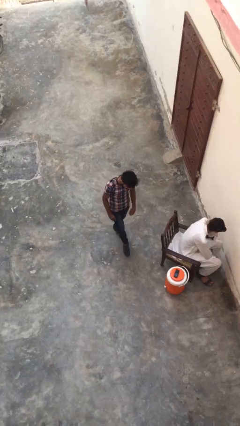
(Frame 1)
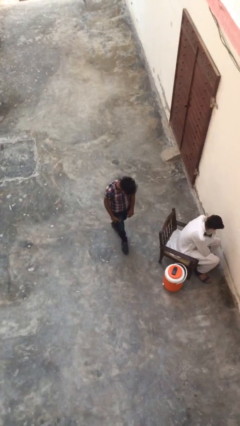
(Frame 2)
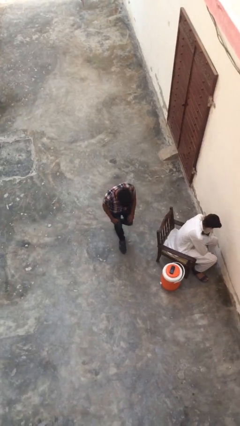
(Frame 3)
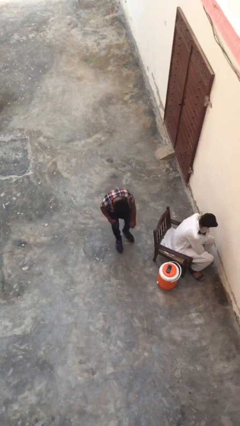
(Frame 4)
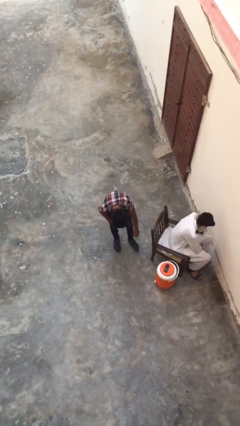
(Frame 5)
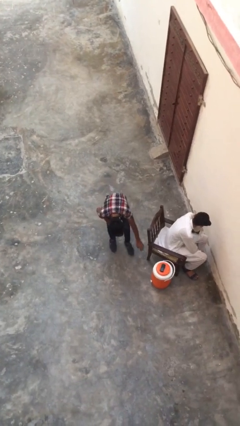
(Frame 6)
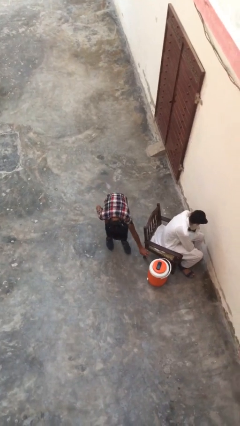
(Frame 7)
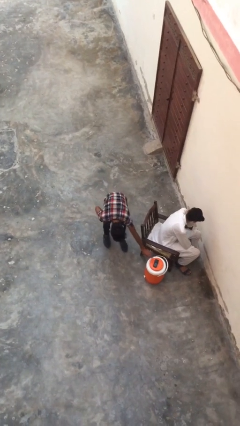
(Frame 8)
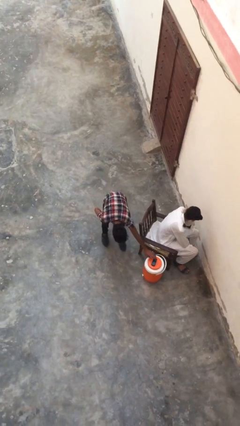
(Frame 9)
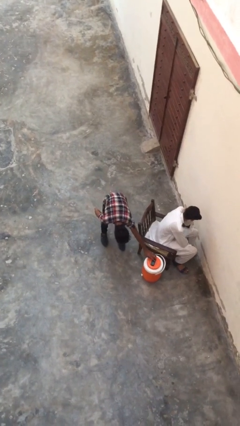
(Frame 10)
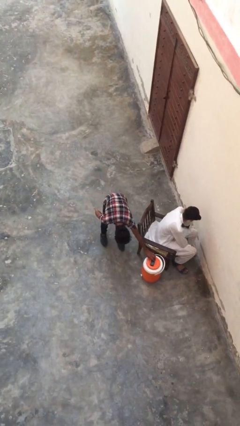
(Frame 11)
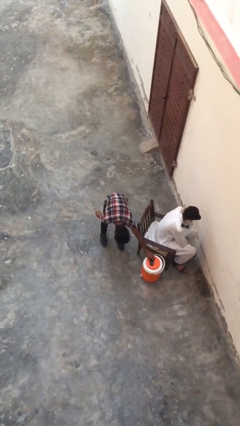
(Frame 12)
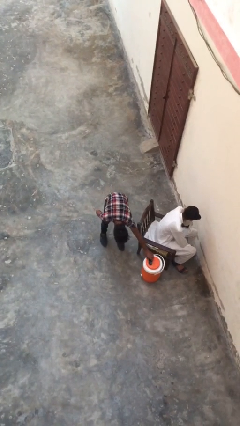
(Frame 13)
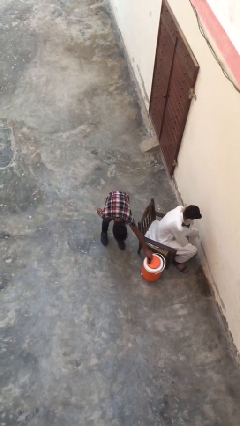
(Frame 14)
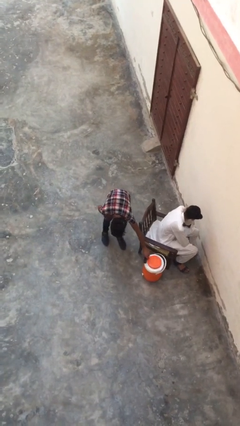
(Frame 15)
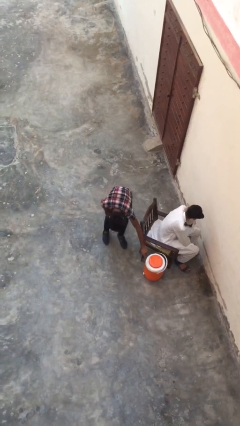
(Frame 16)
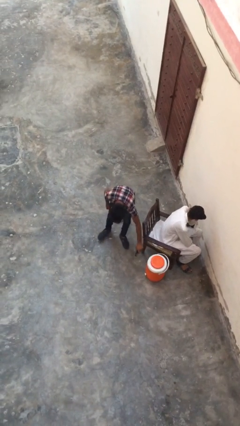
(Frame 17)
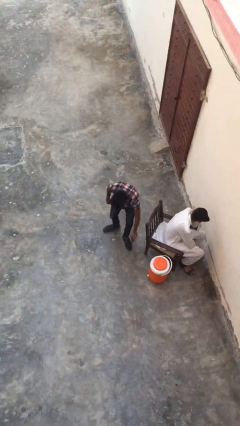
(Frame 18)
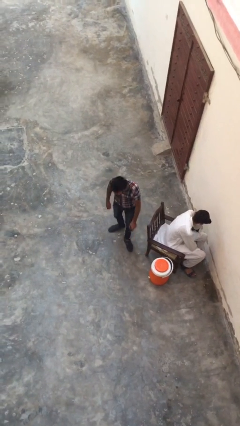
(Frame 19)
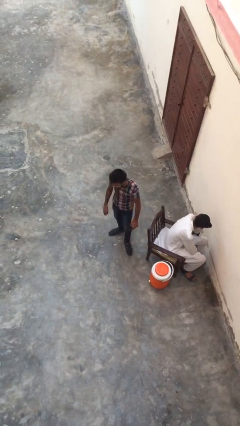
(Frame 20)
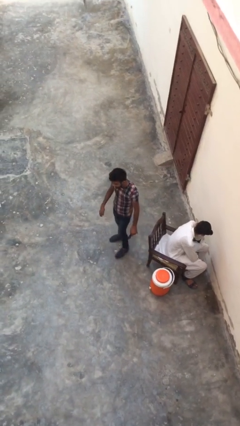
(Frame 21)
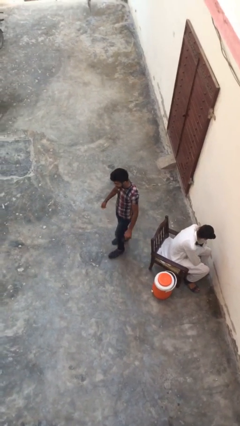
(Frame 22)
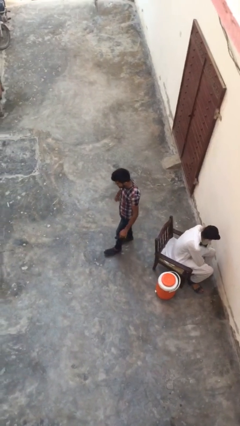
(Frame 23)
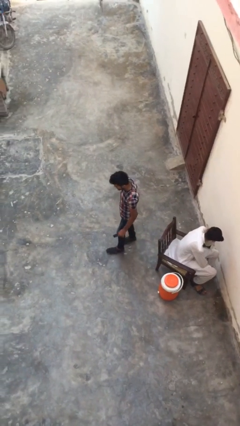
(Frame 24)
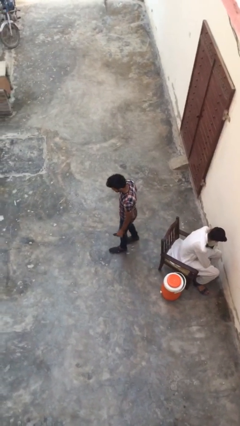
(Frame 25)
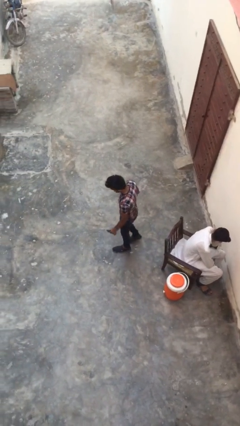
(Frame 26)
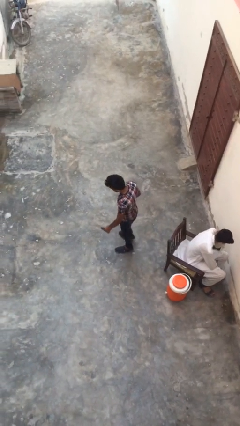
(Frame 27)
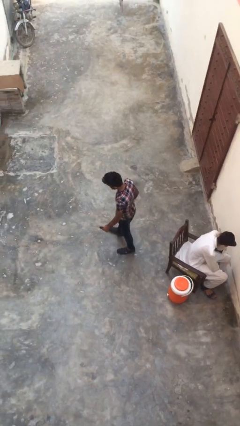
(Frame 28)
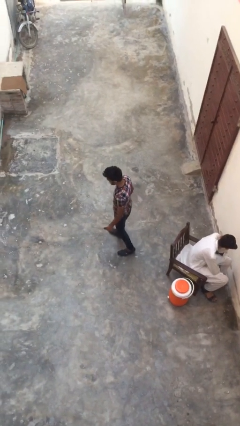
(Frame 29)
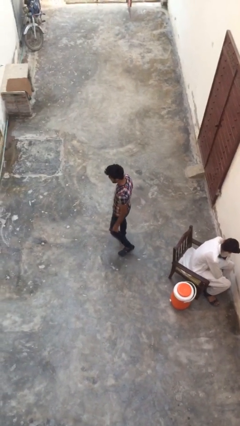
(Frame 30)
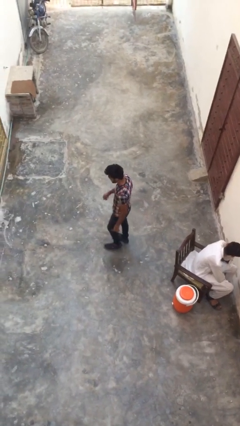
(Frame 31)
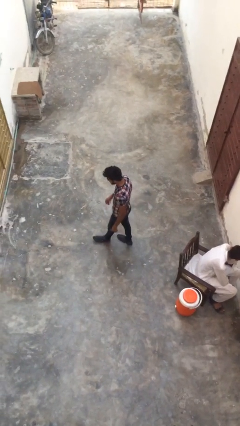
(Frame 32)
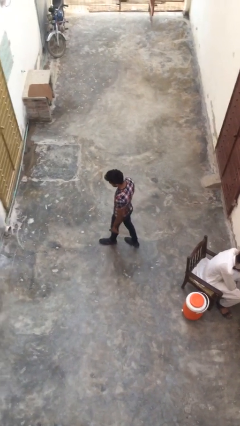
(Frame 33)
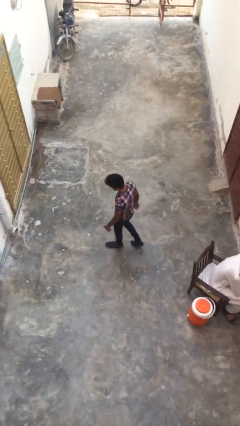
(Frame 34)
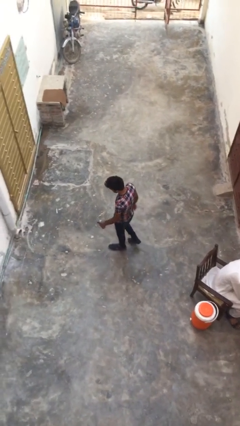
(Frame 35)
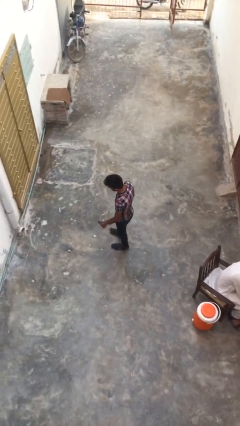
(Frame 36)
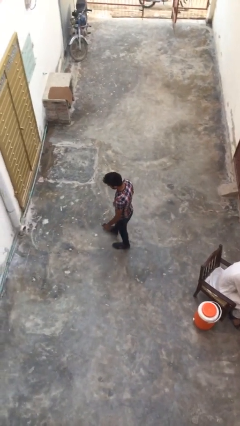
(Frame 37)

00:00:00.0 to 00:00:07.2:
person steals object from person

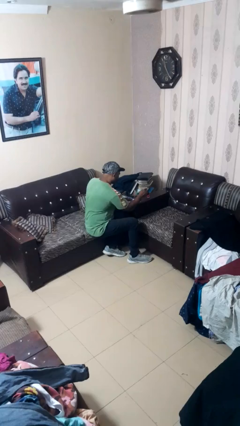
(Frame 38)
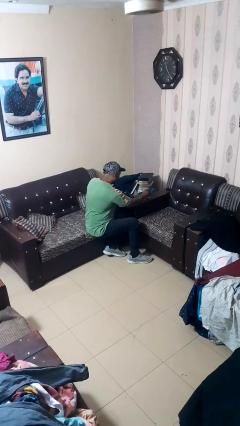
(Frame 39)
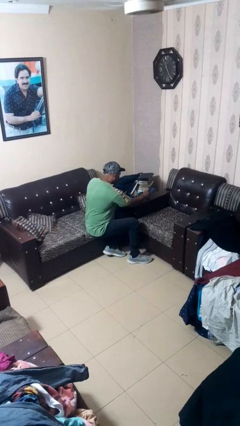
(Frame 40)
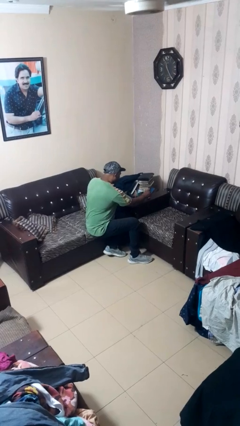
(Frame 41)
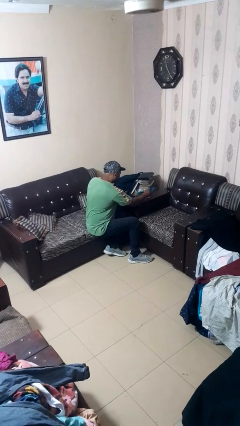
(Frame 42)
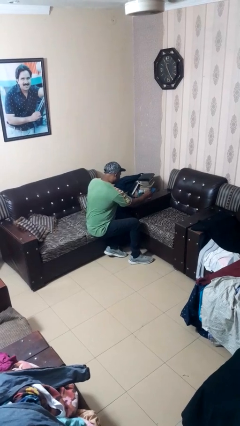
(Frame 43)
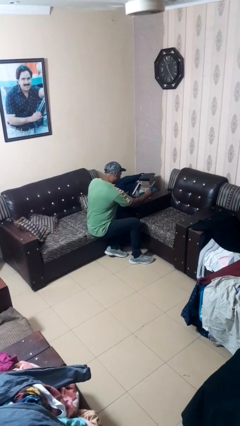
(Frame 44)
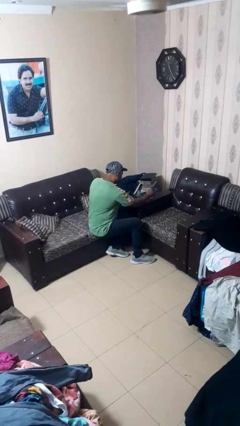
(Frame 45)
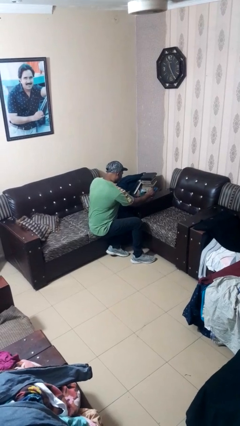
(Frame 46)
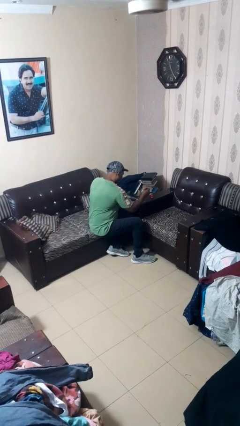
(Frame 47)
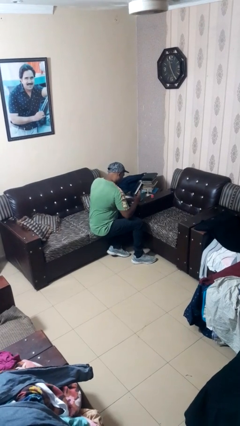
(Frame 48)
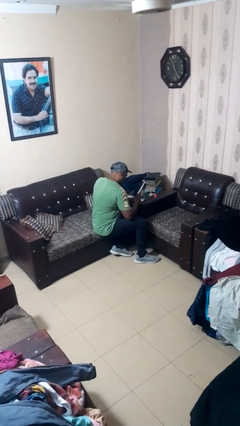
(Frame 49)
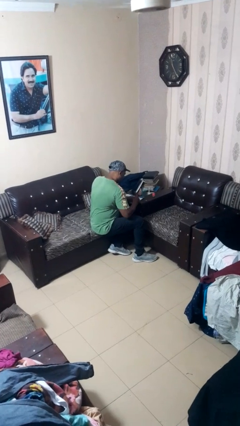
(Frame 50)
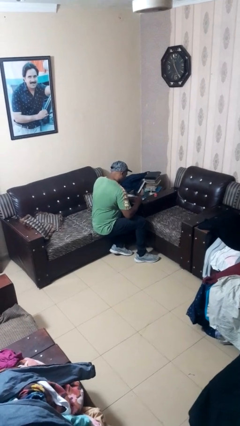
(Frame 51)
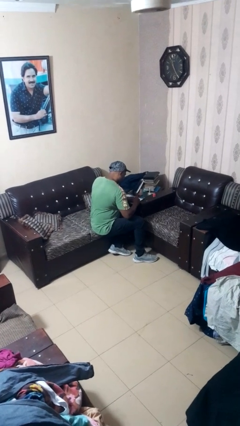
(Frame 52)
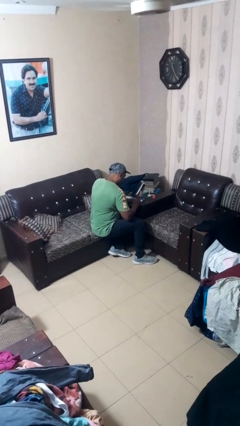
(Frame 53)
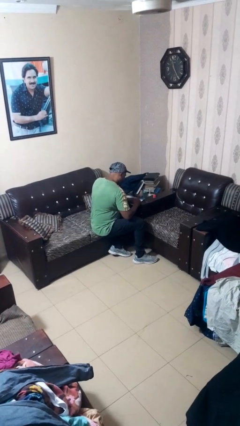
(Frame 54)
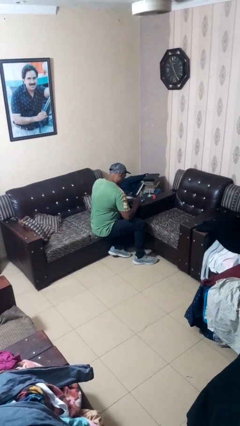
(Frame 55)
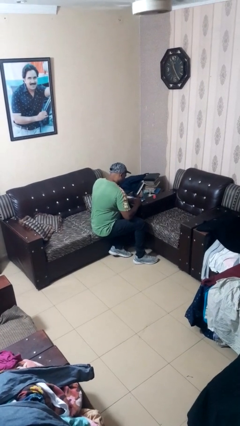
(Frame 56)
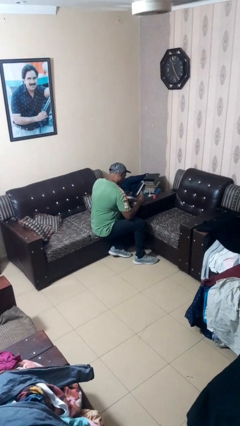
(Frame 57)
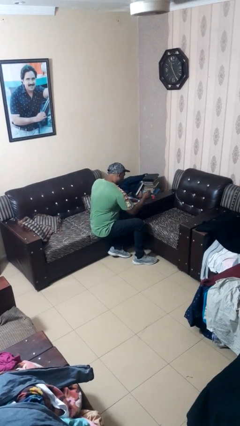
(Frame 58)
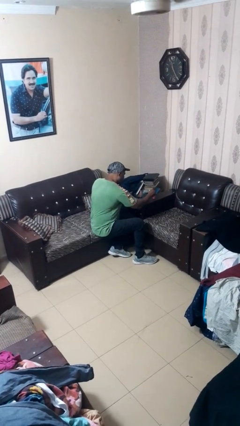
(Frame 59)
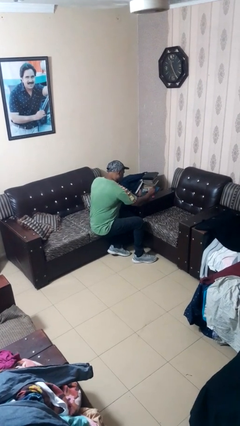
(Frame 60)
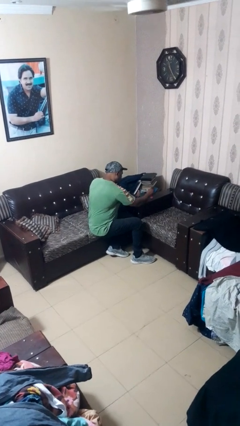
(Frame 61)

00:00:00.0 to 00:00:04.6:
person paints fingernails

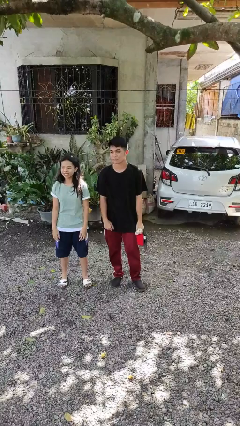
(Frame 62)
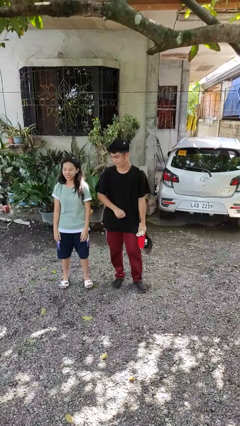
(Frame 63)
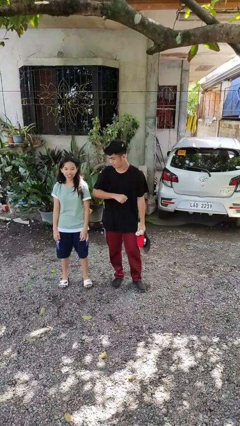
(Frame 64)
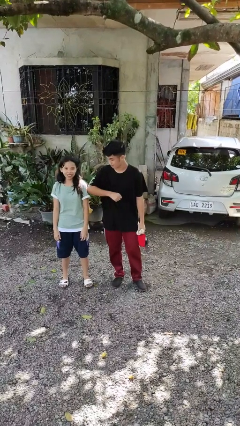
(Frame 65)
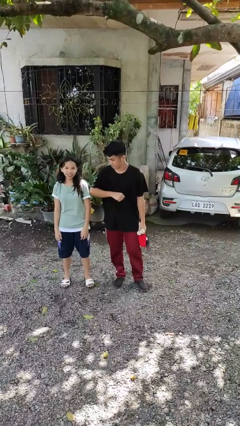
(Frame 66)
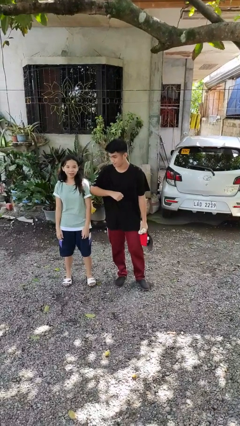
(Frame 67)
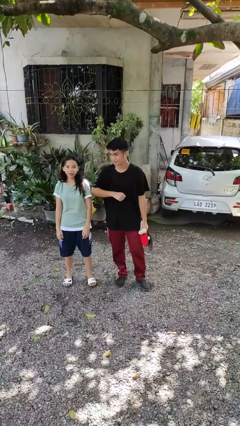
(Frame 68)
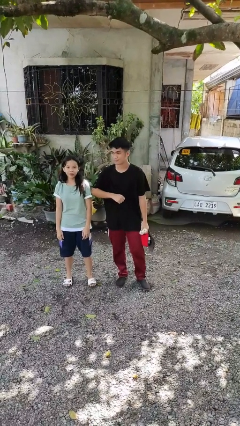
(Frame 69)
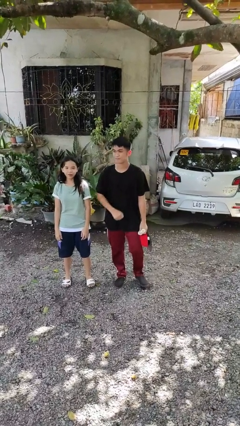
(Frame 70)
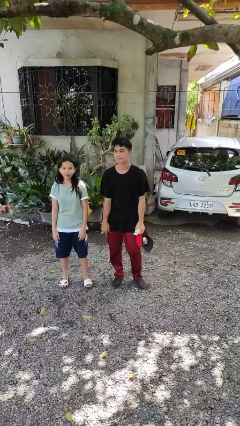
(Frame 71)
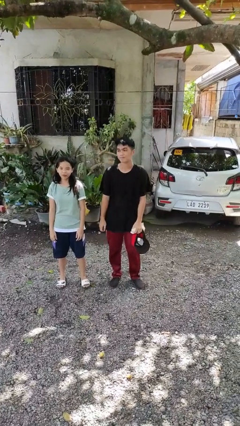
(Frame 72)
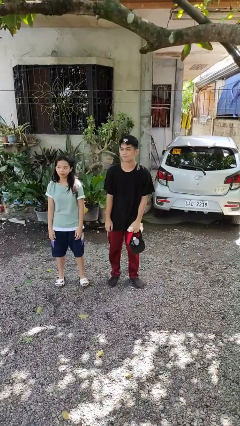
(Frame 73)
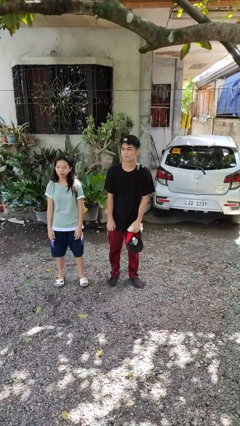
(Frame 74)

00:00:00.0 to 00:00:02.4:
person nudges person with elbow

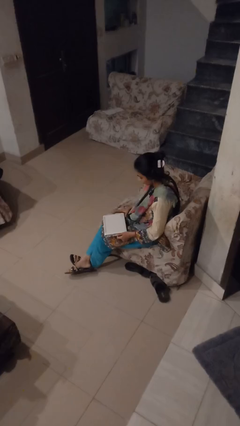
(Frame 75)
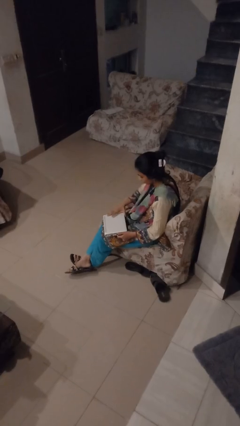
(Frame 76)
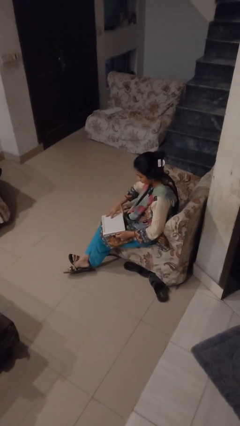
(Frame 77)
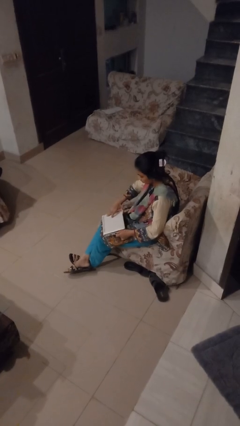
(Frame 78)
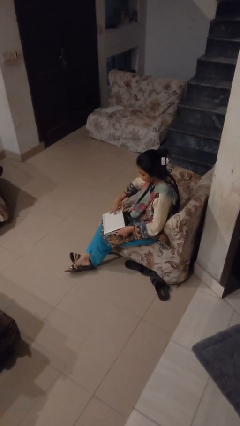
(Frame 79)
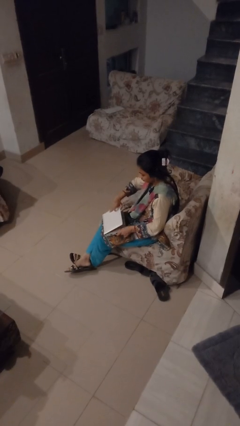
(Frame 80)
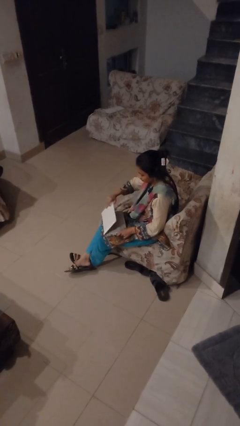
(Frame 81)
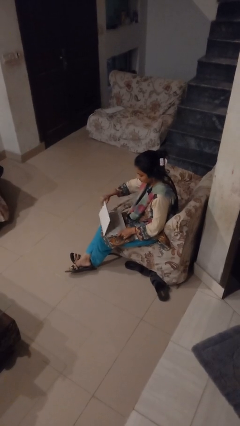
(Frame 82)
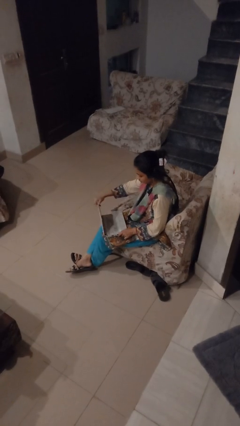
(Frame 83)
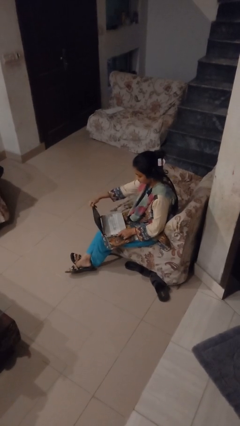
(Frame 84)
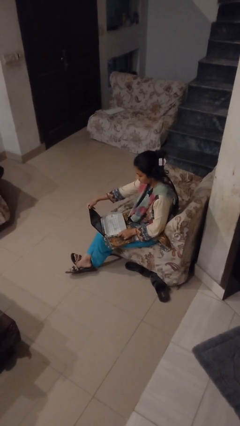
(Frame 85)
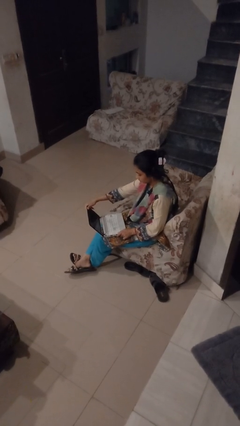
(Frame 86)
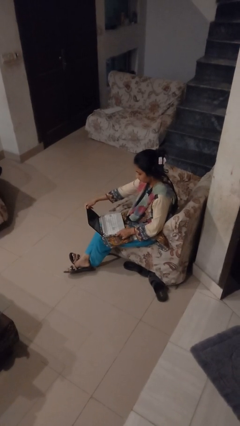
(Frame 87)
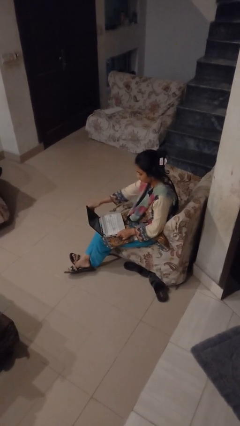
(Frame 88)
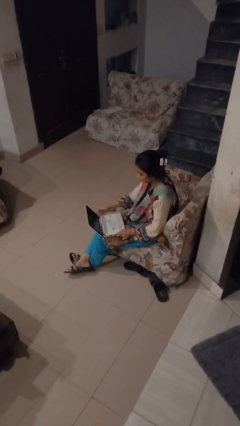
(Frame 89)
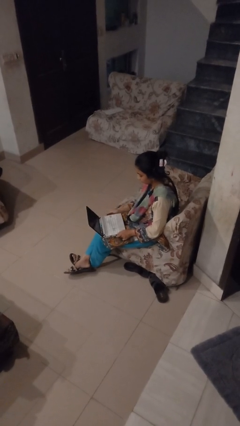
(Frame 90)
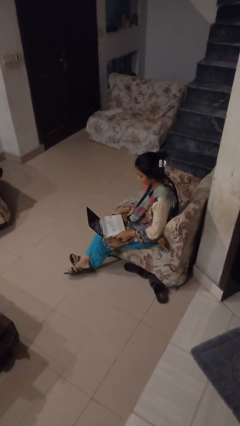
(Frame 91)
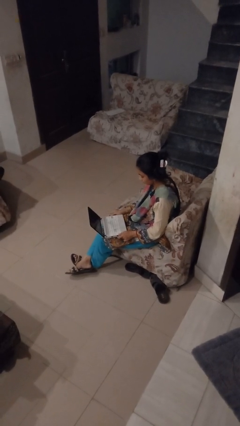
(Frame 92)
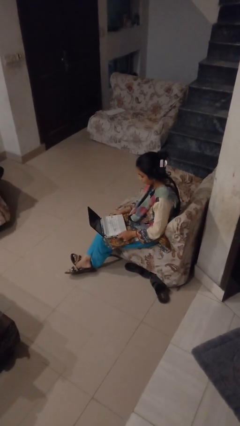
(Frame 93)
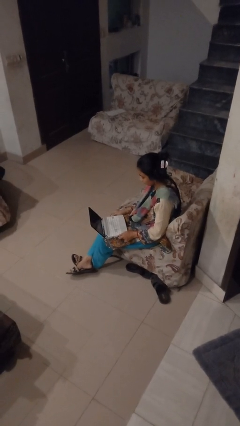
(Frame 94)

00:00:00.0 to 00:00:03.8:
person opens laptop

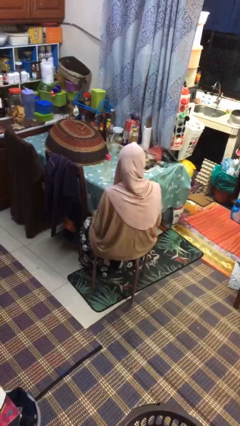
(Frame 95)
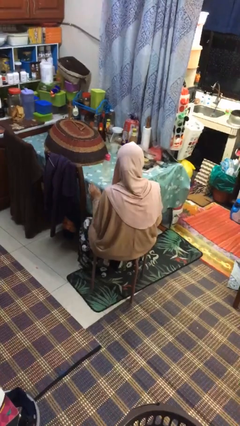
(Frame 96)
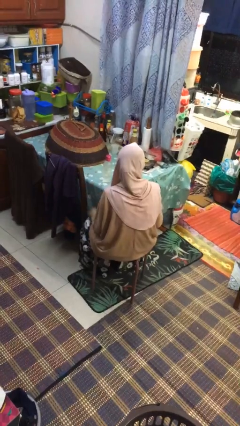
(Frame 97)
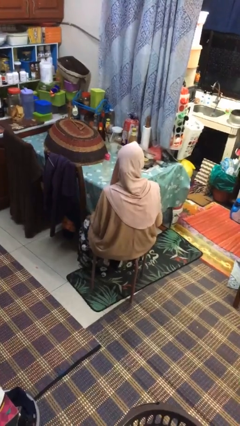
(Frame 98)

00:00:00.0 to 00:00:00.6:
person slaps hands on thighs
